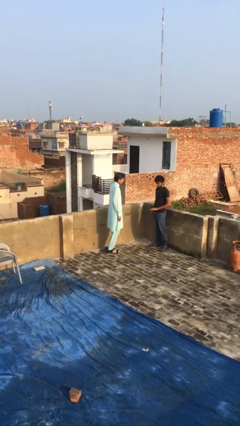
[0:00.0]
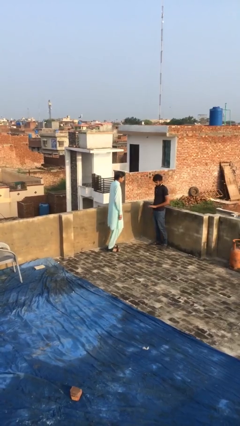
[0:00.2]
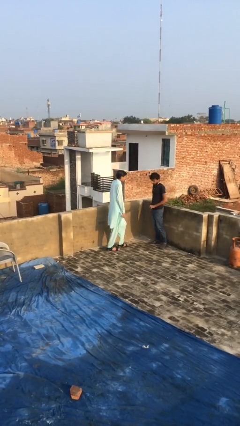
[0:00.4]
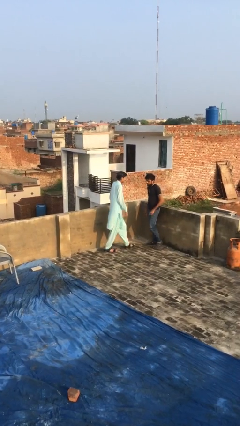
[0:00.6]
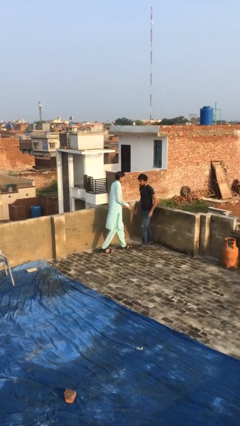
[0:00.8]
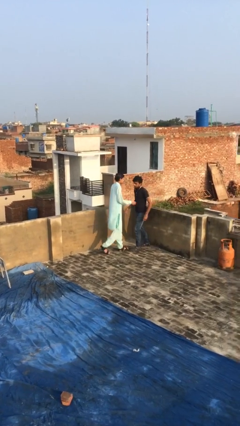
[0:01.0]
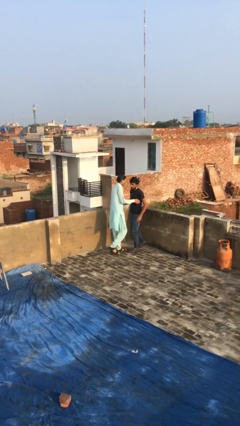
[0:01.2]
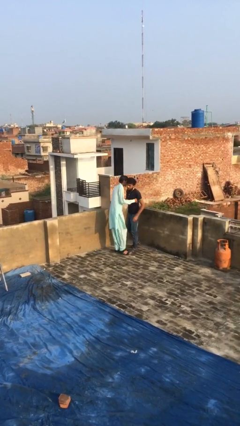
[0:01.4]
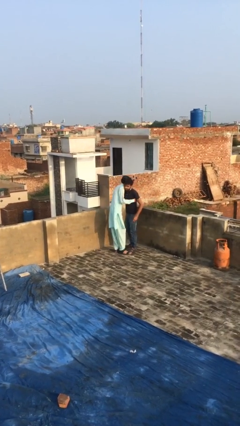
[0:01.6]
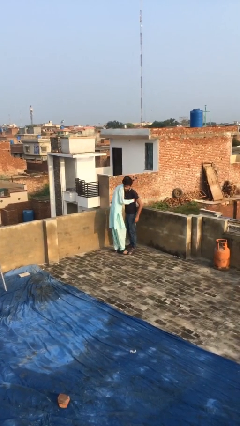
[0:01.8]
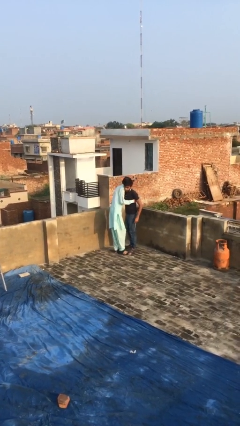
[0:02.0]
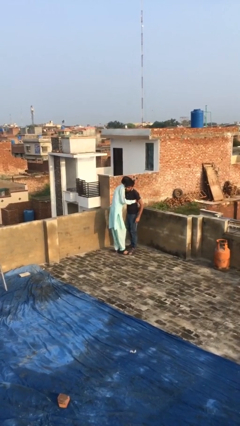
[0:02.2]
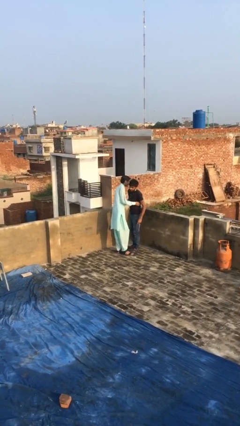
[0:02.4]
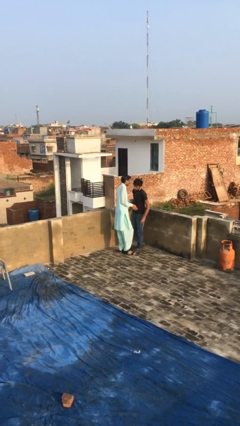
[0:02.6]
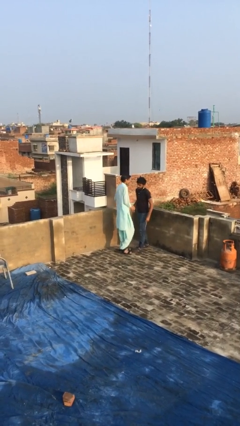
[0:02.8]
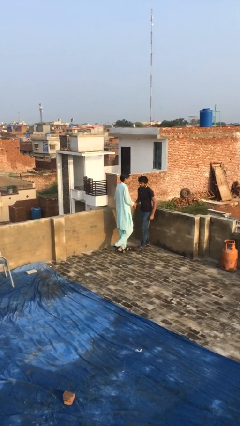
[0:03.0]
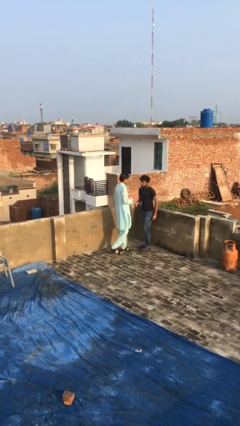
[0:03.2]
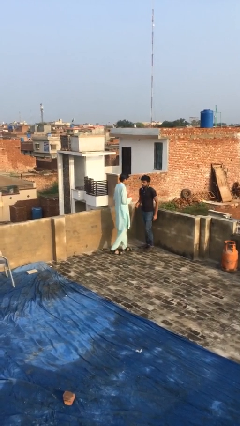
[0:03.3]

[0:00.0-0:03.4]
person embraces person

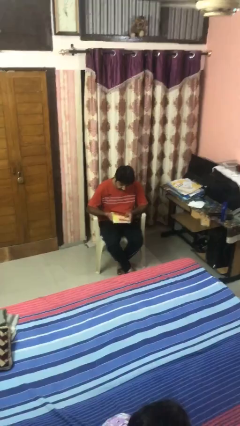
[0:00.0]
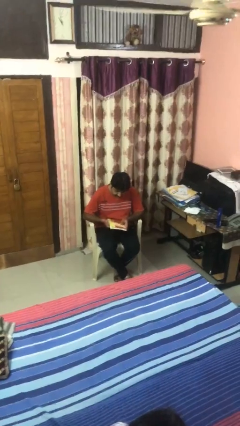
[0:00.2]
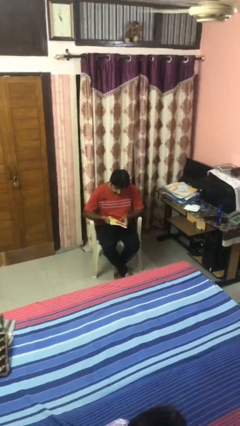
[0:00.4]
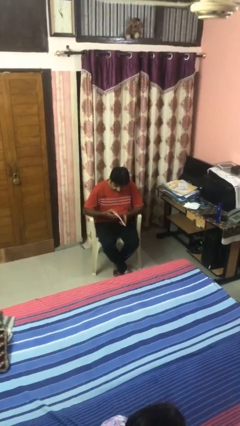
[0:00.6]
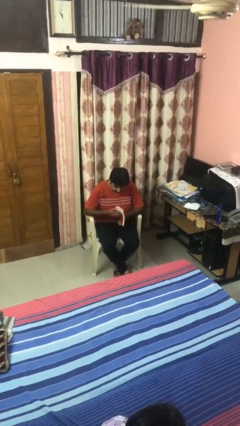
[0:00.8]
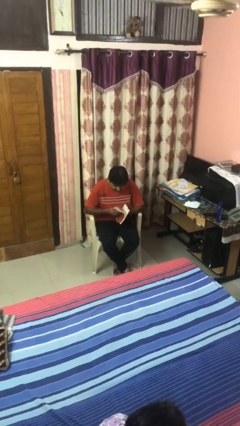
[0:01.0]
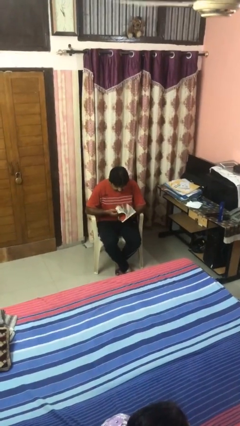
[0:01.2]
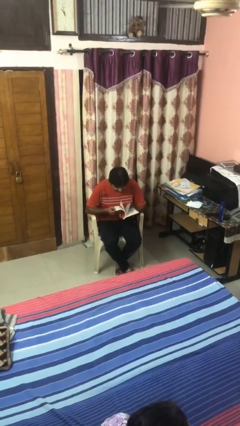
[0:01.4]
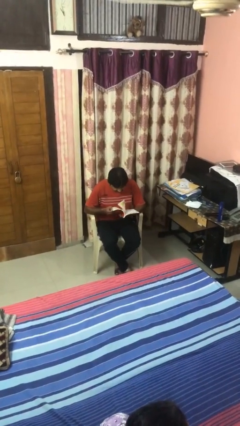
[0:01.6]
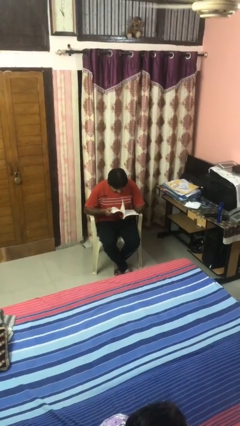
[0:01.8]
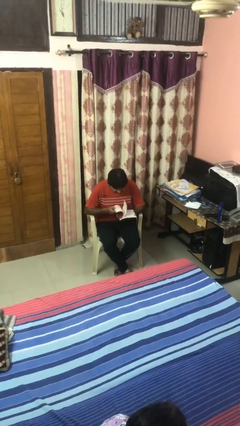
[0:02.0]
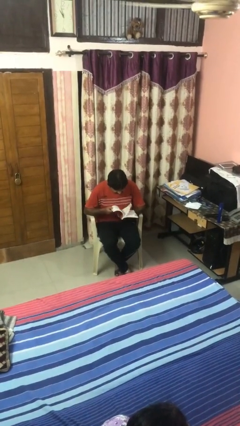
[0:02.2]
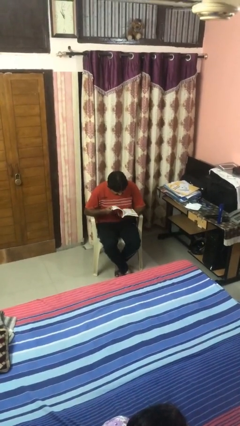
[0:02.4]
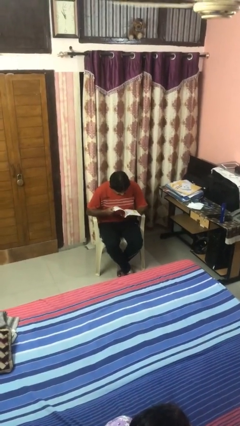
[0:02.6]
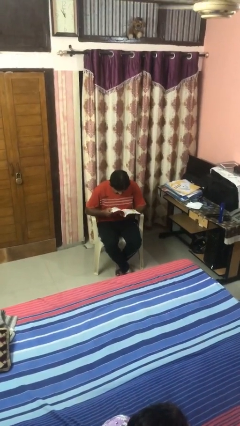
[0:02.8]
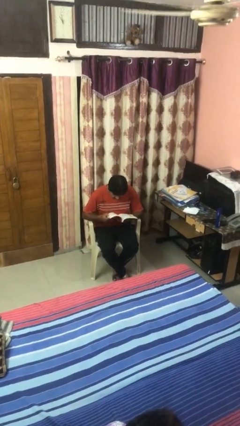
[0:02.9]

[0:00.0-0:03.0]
person reads magazine

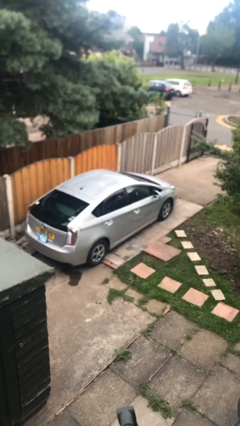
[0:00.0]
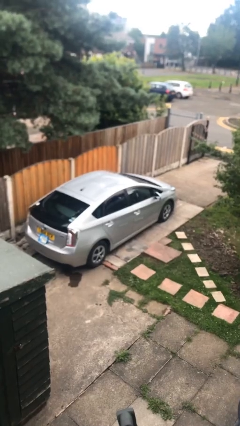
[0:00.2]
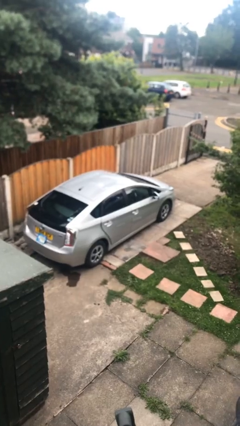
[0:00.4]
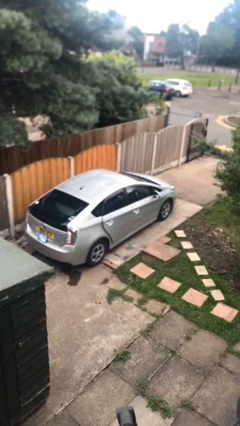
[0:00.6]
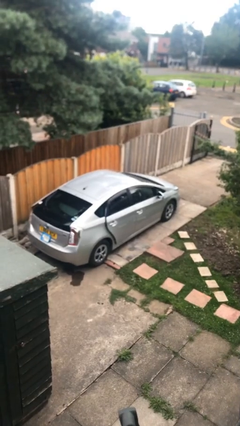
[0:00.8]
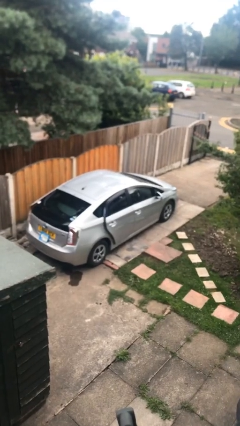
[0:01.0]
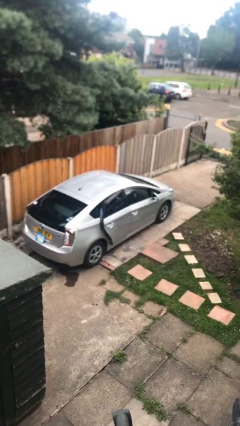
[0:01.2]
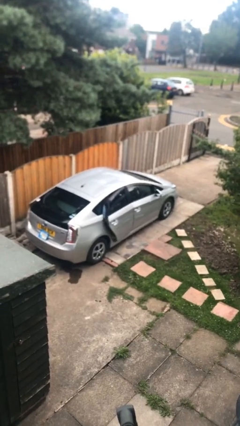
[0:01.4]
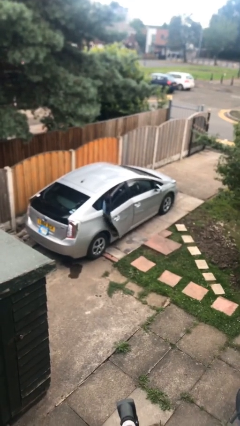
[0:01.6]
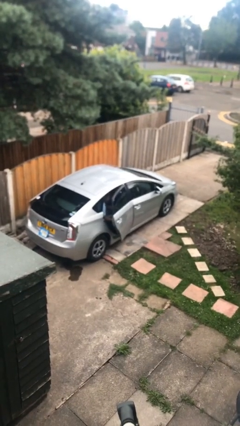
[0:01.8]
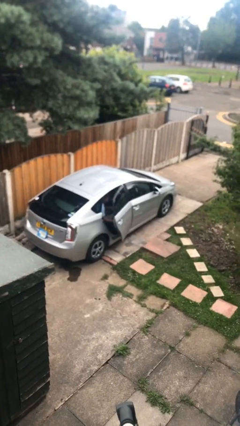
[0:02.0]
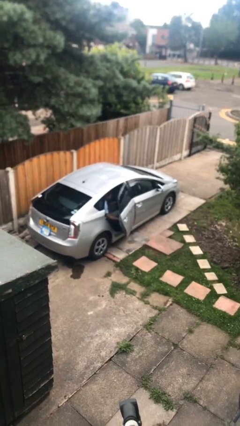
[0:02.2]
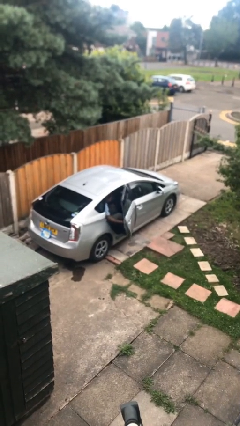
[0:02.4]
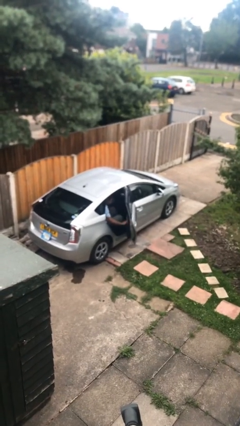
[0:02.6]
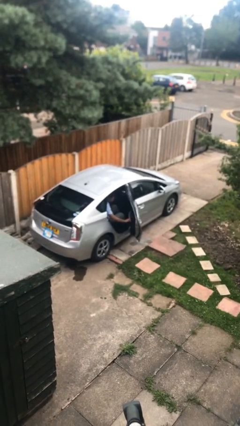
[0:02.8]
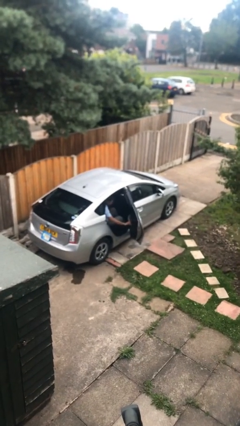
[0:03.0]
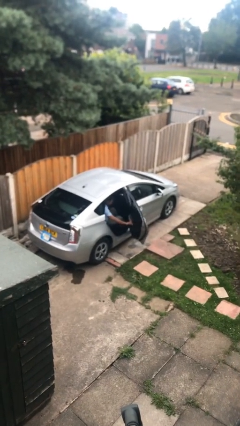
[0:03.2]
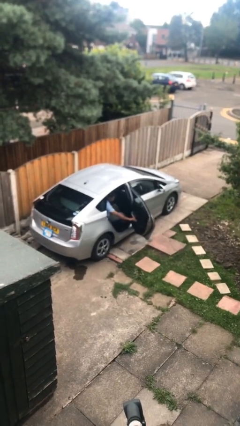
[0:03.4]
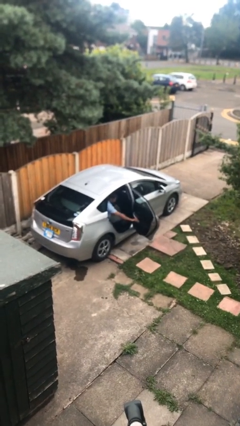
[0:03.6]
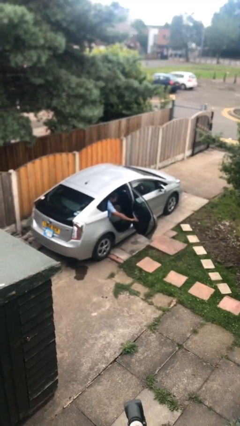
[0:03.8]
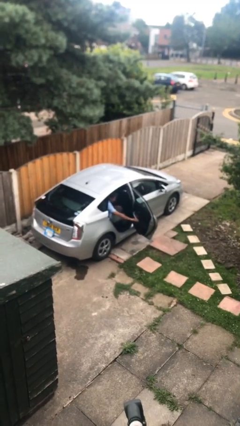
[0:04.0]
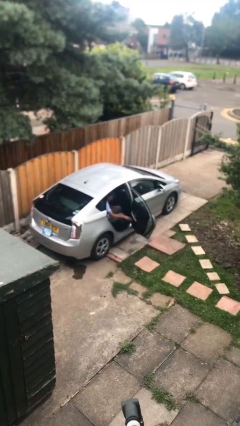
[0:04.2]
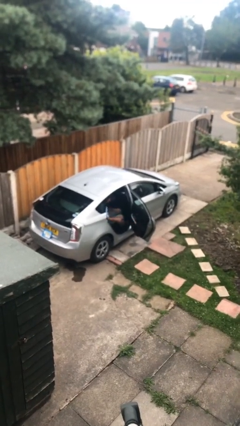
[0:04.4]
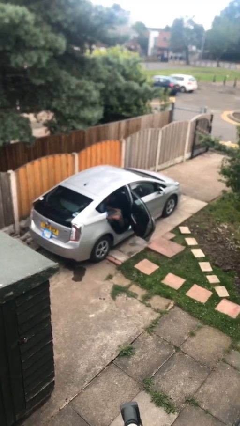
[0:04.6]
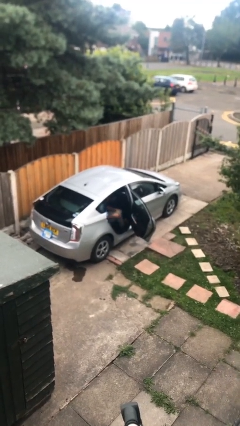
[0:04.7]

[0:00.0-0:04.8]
person opens car door

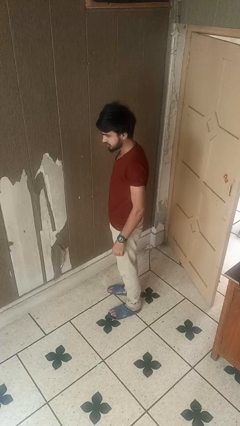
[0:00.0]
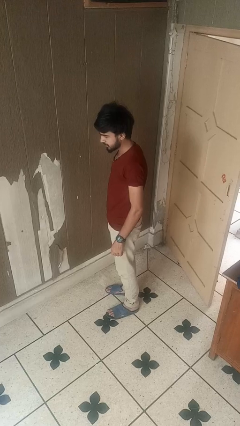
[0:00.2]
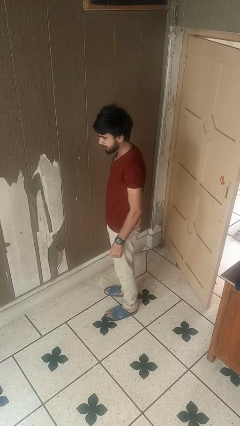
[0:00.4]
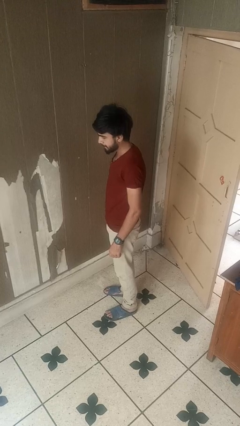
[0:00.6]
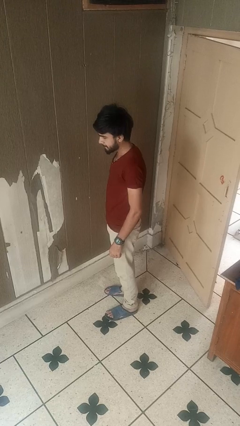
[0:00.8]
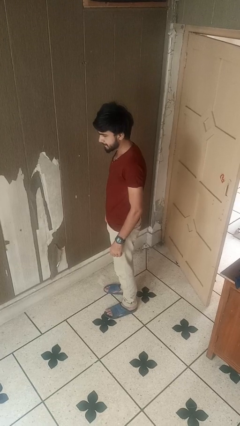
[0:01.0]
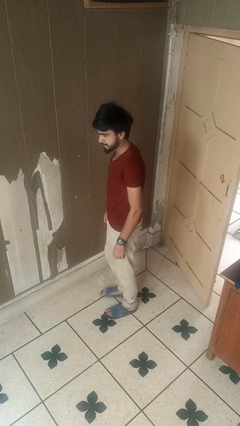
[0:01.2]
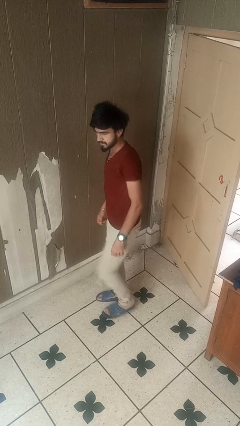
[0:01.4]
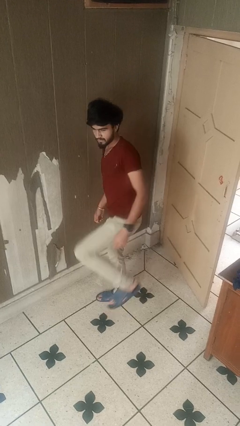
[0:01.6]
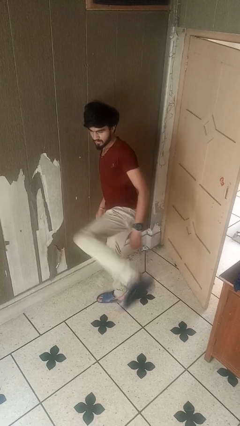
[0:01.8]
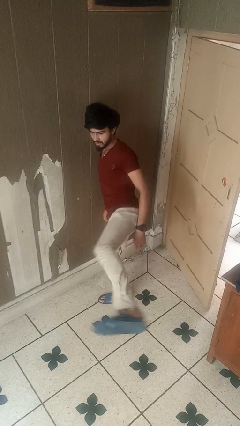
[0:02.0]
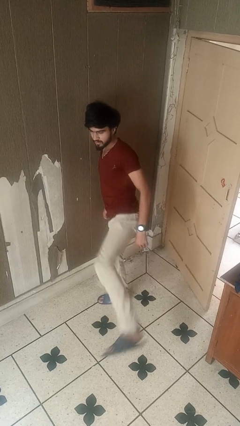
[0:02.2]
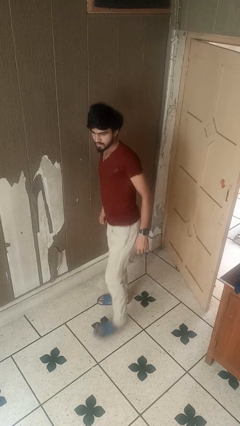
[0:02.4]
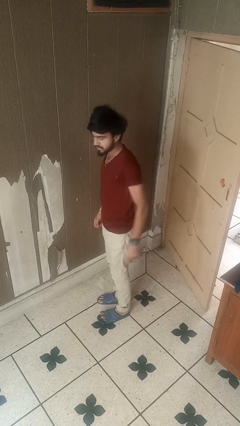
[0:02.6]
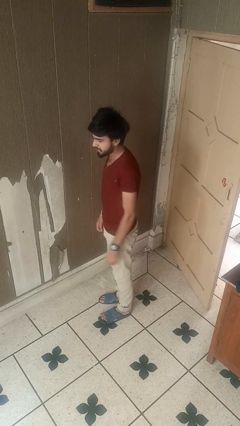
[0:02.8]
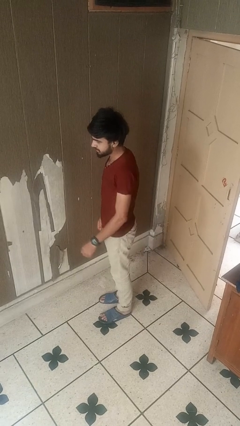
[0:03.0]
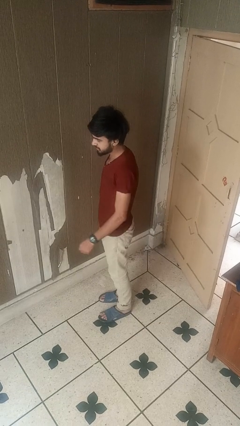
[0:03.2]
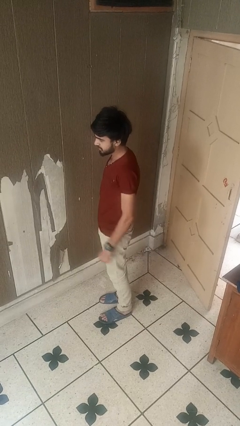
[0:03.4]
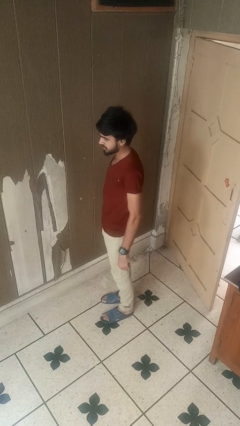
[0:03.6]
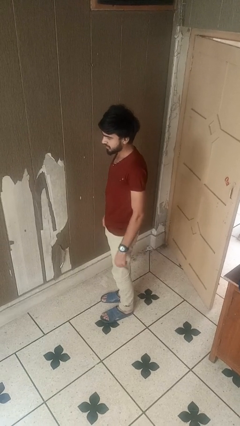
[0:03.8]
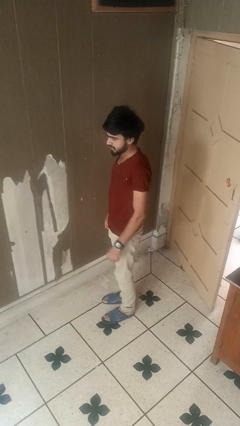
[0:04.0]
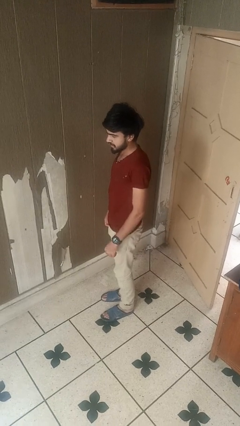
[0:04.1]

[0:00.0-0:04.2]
person karate kicks

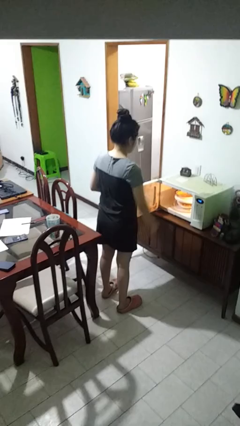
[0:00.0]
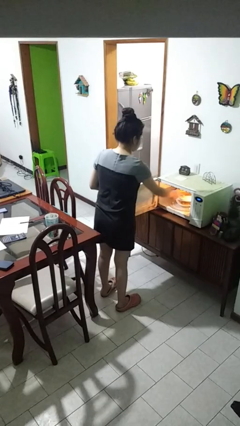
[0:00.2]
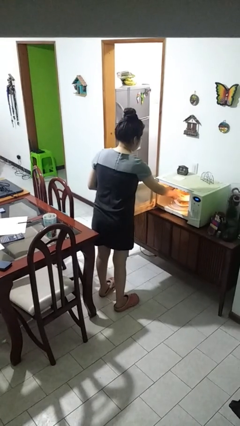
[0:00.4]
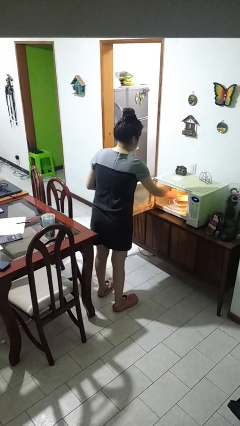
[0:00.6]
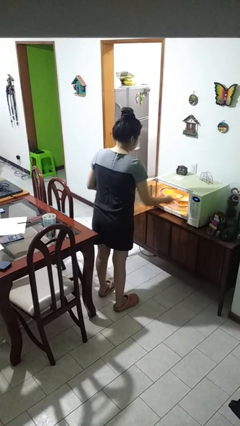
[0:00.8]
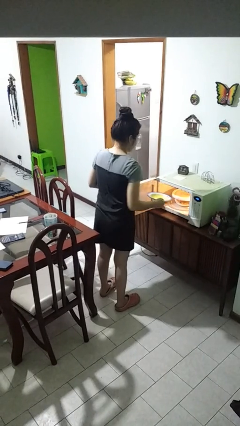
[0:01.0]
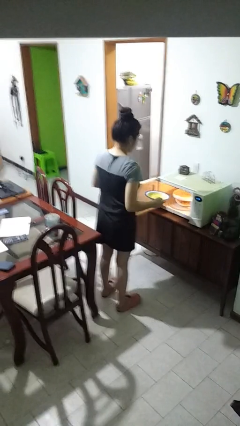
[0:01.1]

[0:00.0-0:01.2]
person takes object from microwave

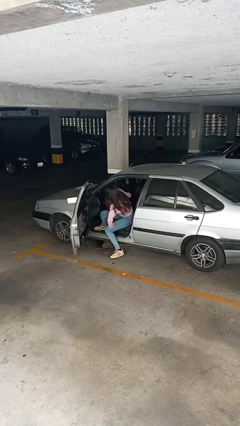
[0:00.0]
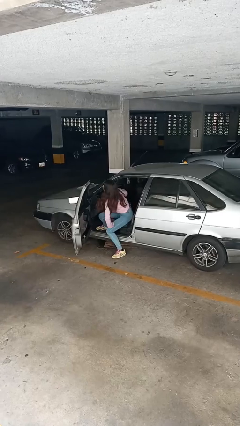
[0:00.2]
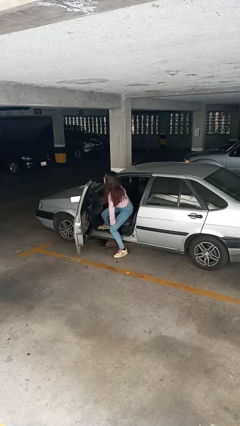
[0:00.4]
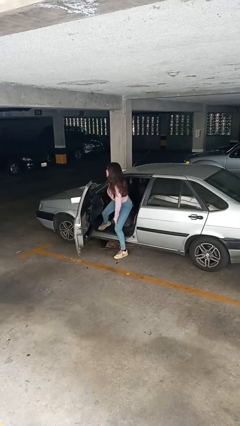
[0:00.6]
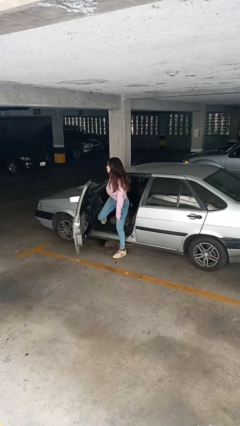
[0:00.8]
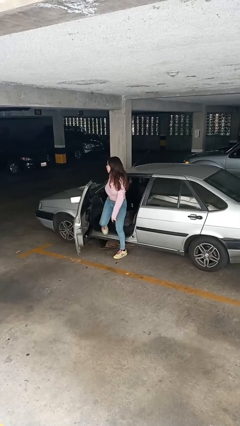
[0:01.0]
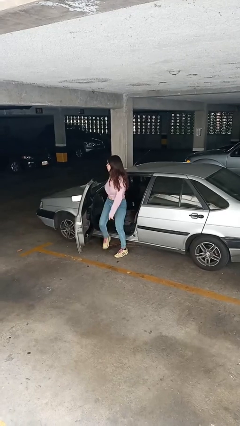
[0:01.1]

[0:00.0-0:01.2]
person exits car
